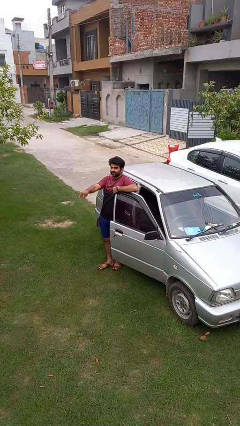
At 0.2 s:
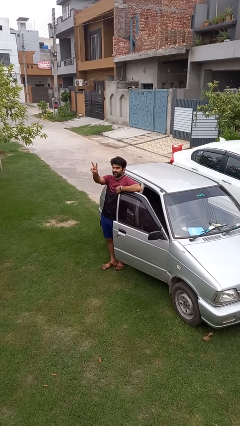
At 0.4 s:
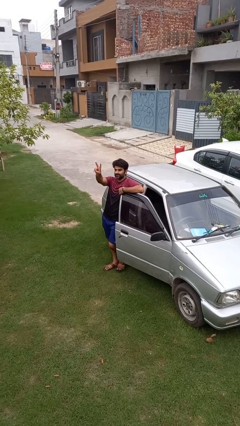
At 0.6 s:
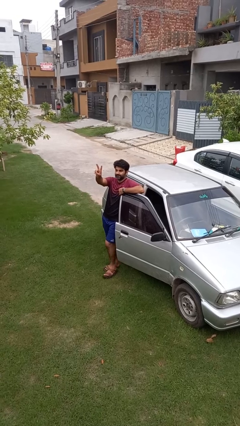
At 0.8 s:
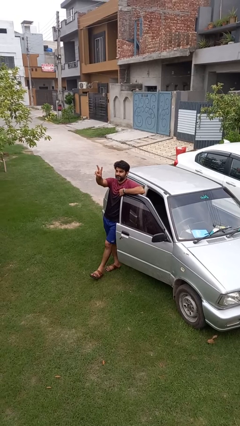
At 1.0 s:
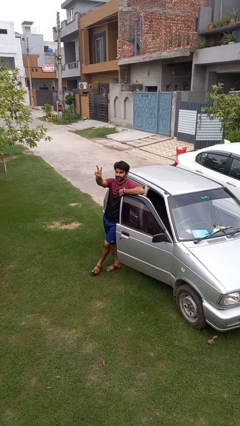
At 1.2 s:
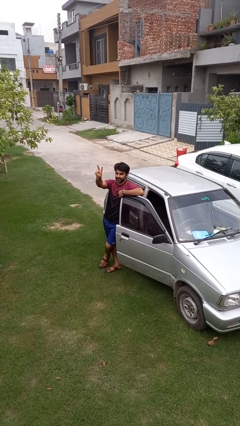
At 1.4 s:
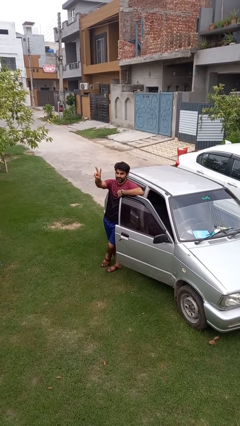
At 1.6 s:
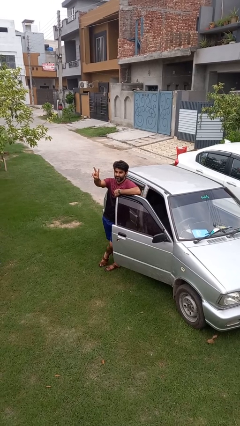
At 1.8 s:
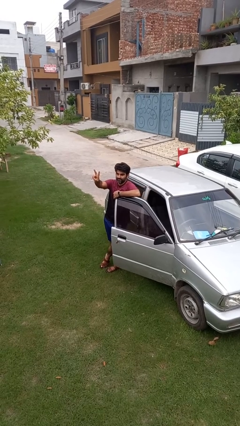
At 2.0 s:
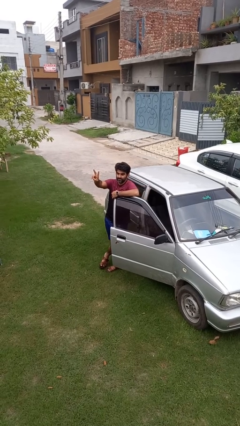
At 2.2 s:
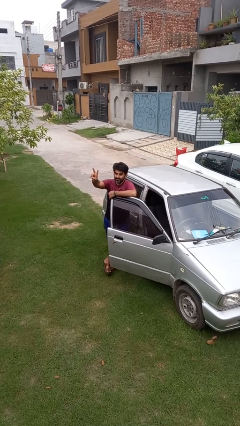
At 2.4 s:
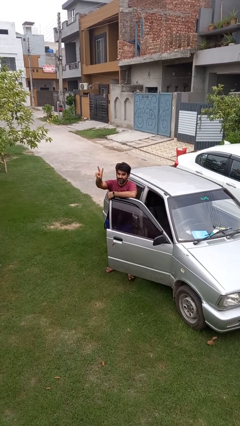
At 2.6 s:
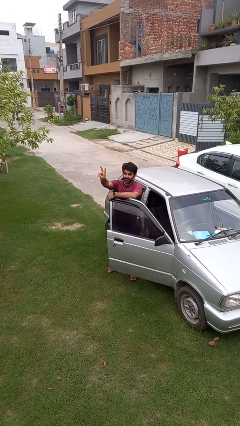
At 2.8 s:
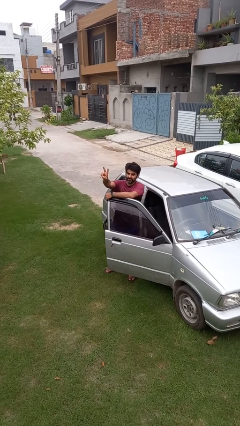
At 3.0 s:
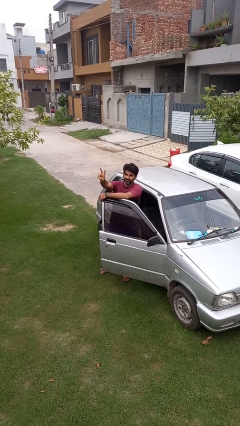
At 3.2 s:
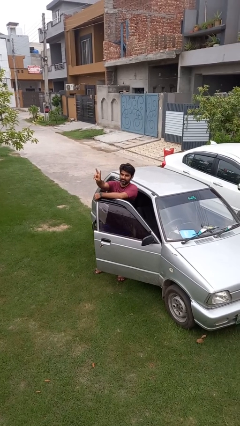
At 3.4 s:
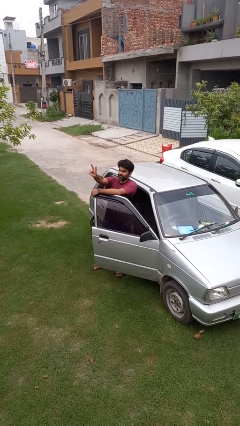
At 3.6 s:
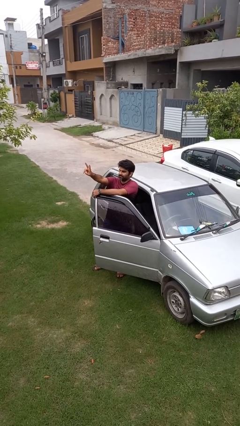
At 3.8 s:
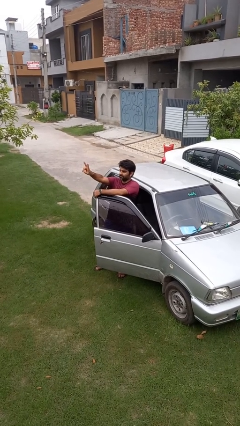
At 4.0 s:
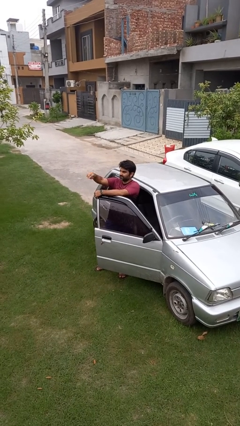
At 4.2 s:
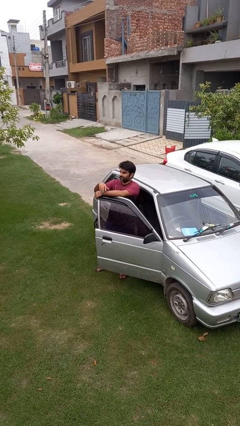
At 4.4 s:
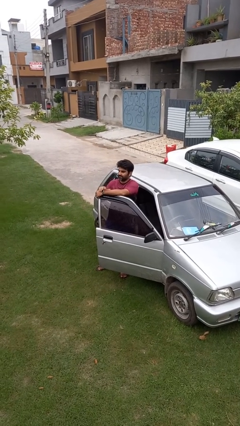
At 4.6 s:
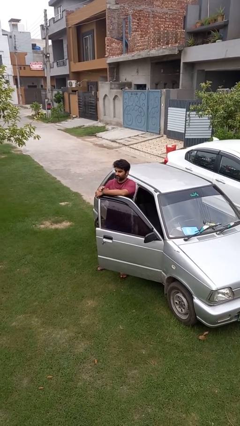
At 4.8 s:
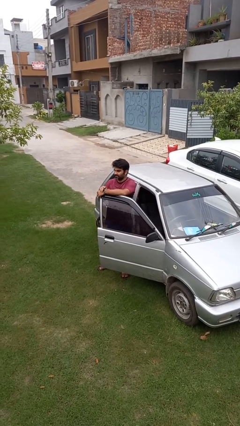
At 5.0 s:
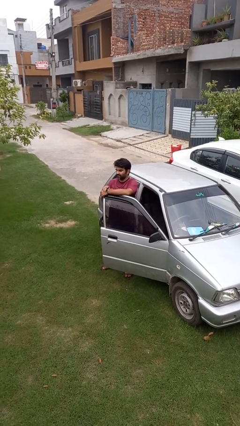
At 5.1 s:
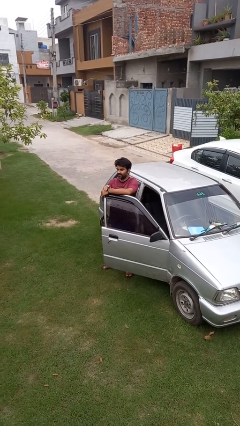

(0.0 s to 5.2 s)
person gestures peace

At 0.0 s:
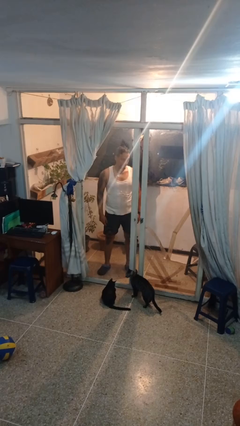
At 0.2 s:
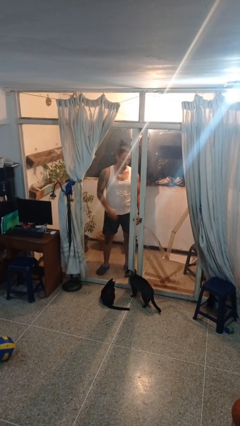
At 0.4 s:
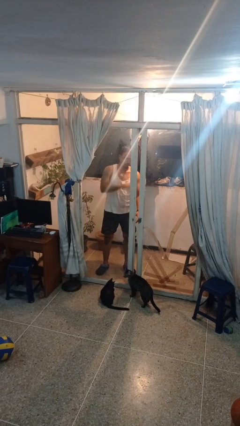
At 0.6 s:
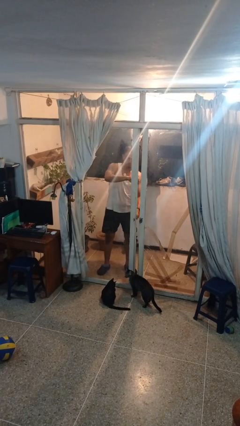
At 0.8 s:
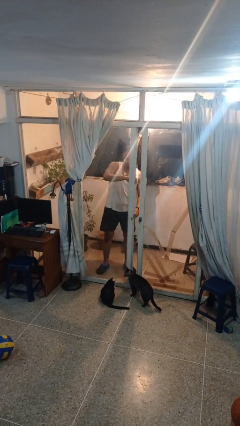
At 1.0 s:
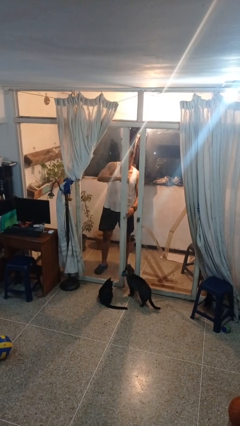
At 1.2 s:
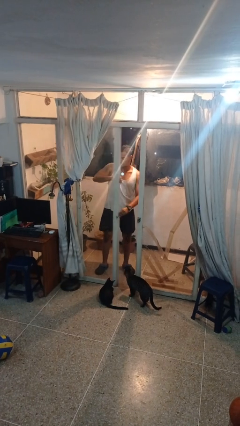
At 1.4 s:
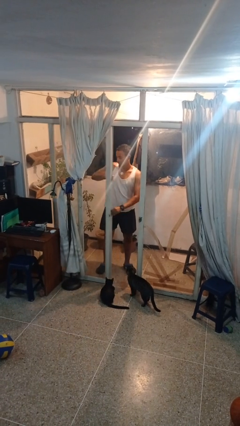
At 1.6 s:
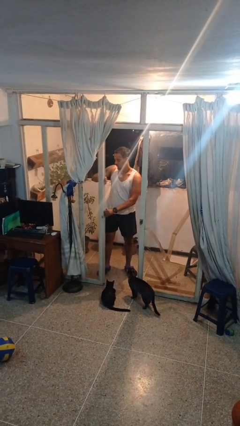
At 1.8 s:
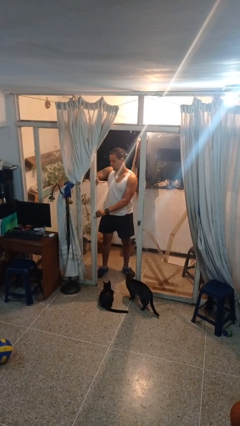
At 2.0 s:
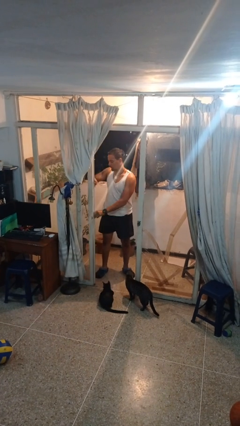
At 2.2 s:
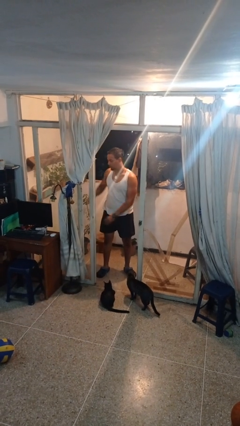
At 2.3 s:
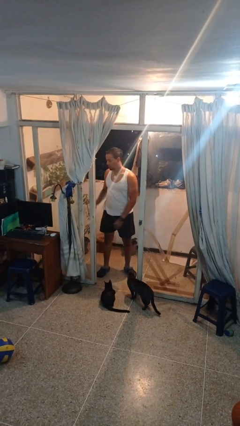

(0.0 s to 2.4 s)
person opens sliding door

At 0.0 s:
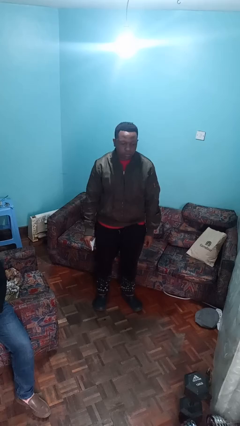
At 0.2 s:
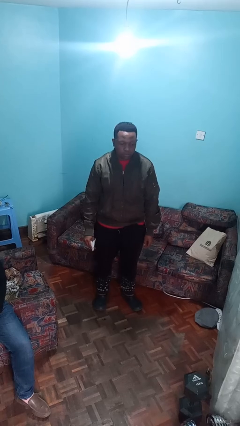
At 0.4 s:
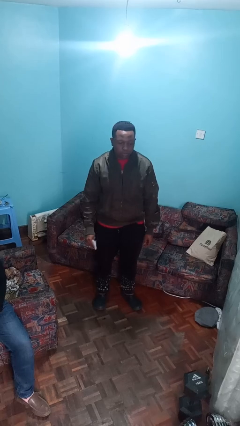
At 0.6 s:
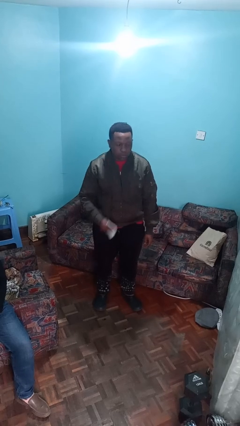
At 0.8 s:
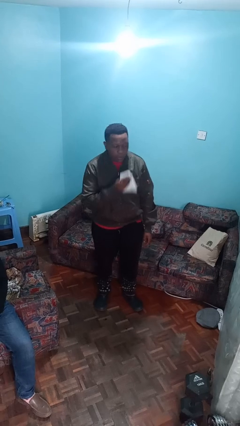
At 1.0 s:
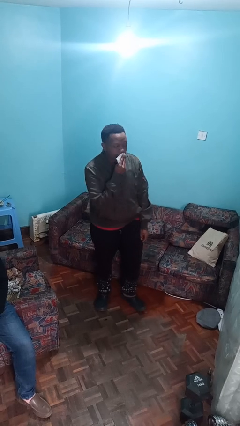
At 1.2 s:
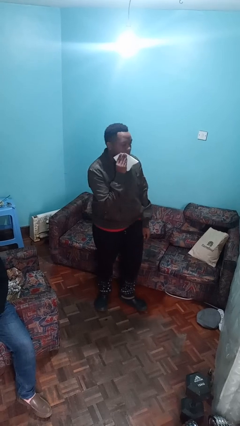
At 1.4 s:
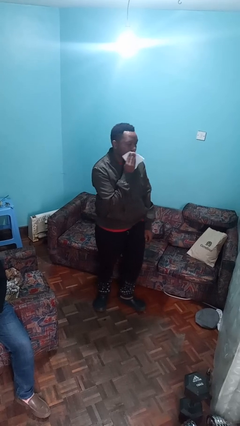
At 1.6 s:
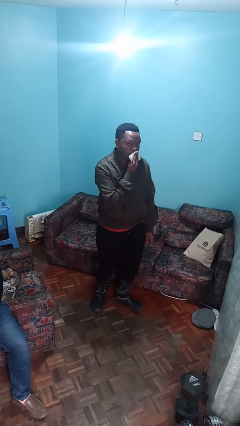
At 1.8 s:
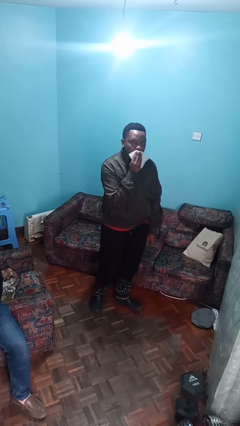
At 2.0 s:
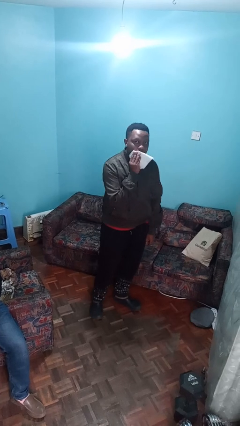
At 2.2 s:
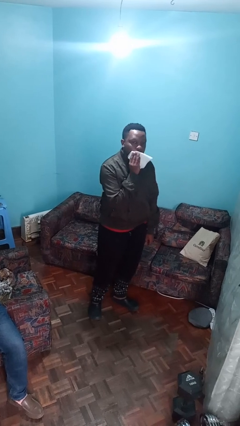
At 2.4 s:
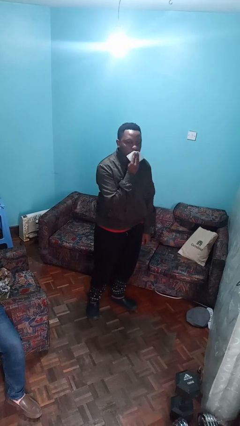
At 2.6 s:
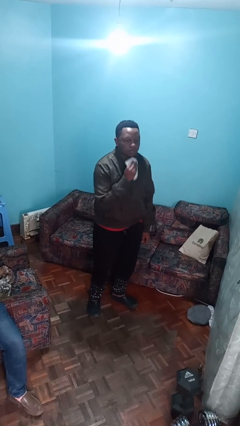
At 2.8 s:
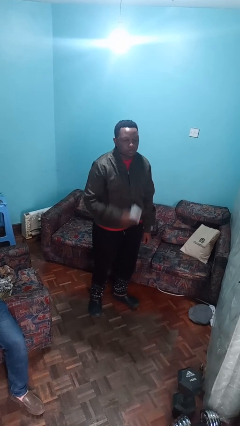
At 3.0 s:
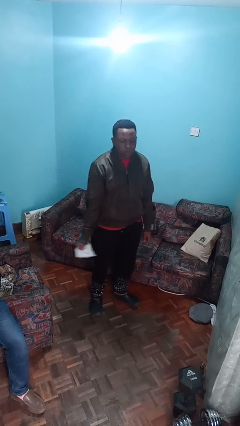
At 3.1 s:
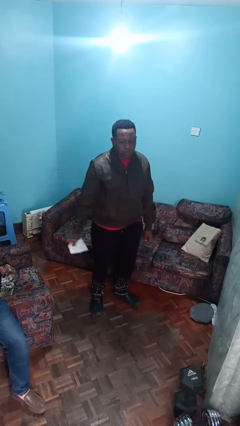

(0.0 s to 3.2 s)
person wipes mouth with napkin

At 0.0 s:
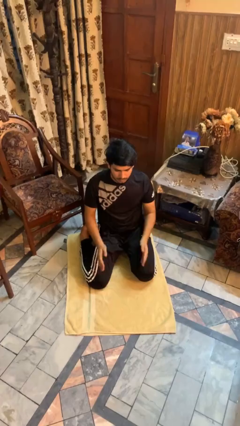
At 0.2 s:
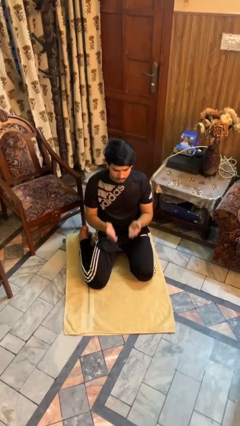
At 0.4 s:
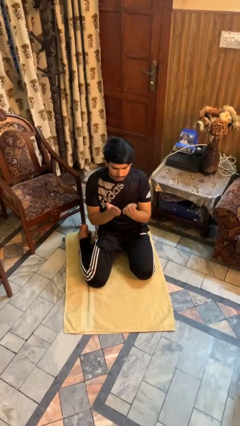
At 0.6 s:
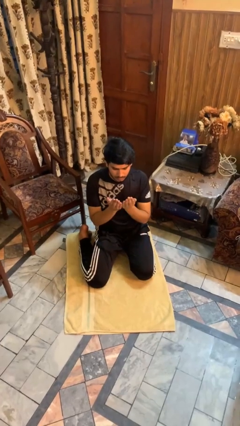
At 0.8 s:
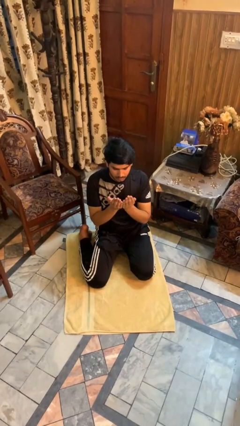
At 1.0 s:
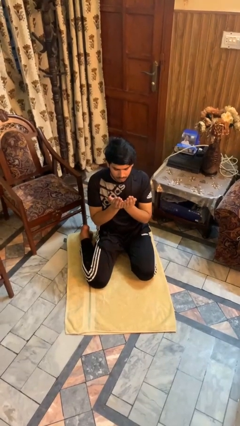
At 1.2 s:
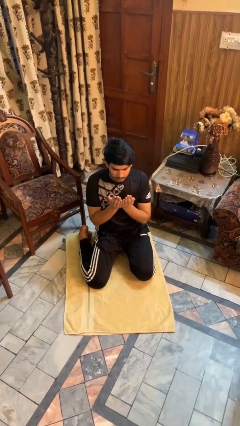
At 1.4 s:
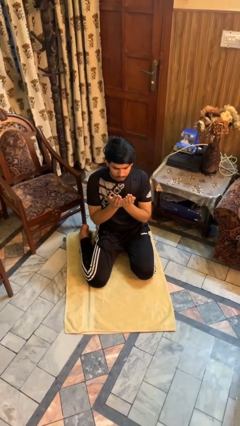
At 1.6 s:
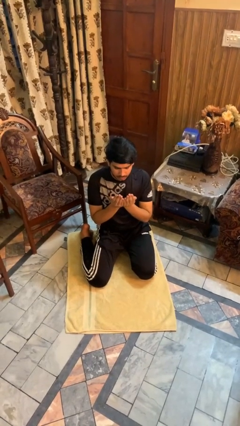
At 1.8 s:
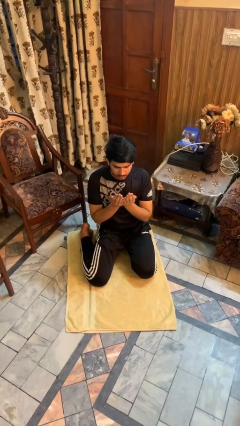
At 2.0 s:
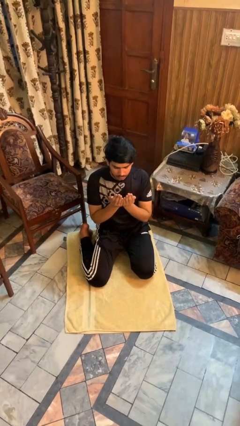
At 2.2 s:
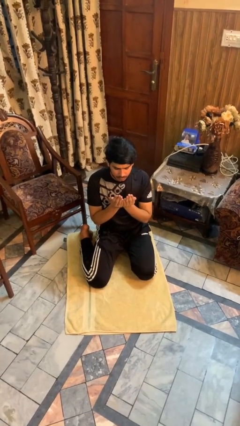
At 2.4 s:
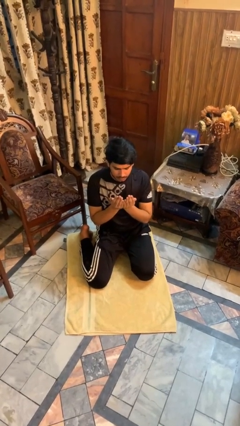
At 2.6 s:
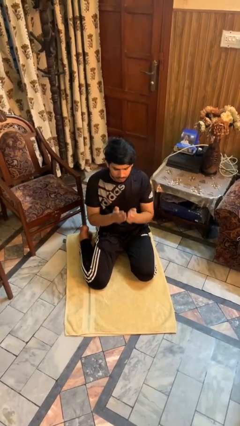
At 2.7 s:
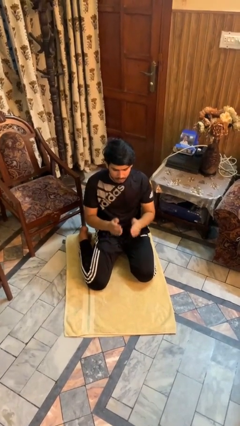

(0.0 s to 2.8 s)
person prays

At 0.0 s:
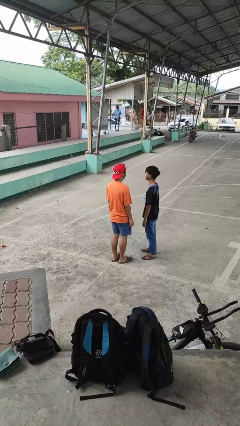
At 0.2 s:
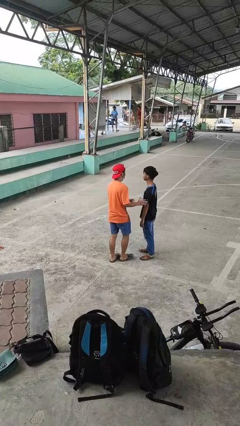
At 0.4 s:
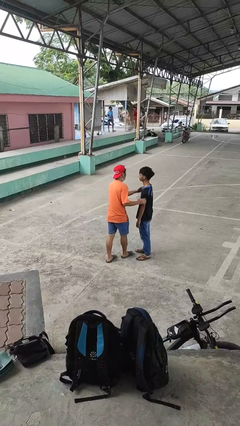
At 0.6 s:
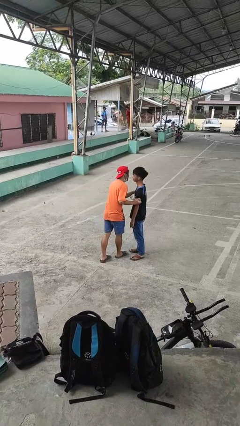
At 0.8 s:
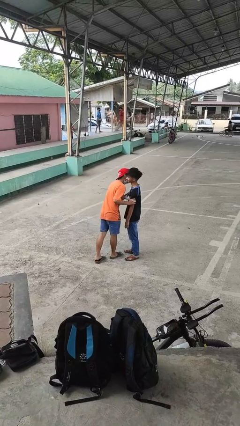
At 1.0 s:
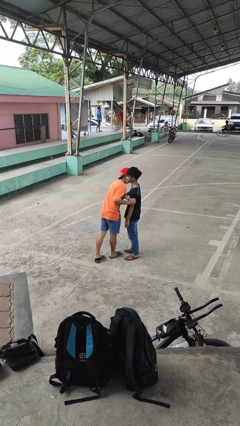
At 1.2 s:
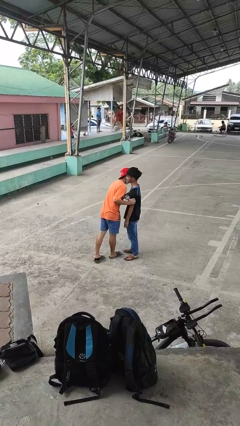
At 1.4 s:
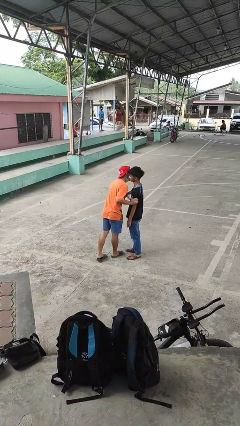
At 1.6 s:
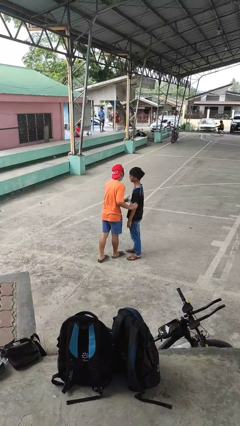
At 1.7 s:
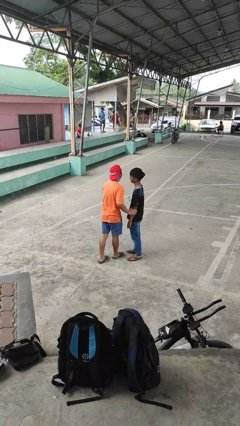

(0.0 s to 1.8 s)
person kisses cheek of person

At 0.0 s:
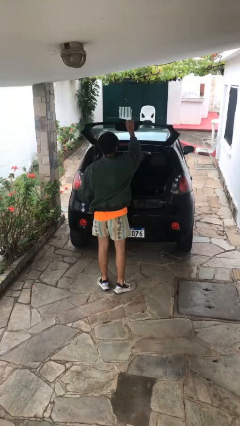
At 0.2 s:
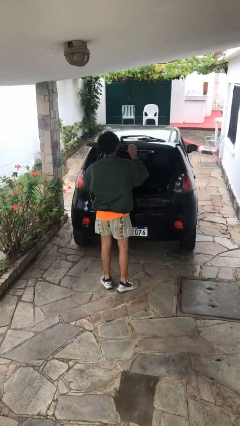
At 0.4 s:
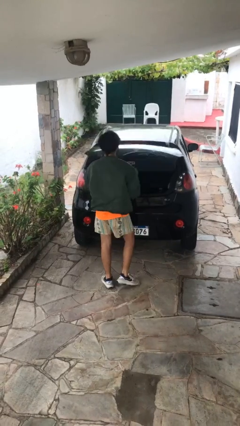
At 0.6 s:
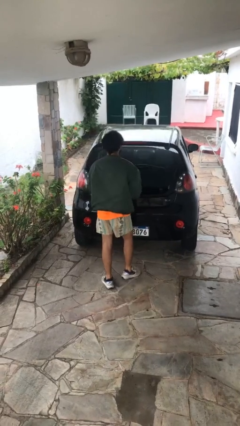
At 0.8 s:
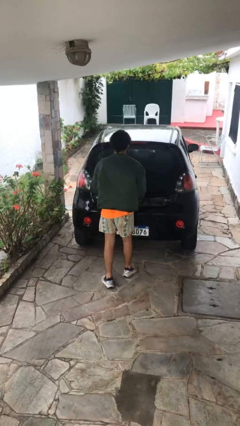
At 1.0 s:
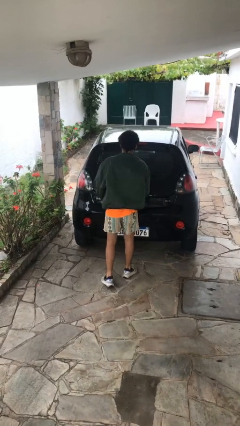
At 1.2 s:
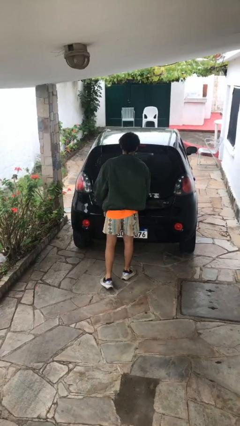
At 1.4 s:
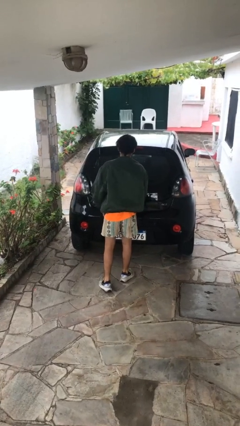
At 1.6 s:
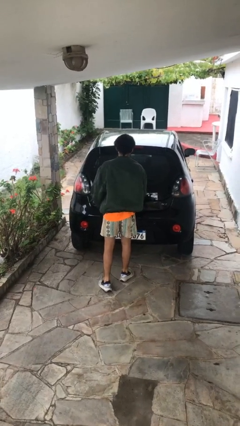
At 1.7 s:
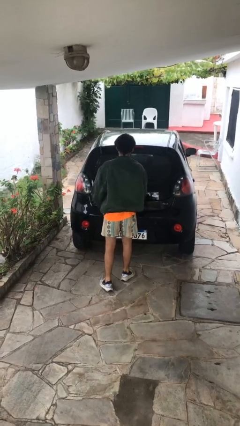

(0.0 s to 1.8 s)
person closes car trunk

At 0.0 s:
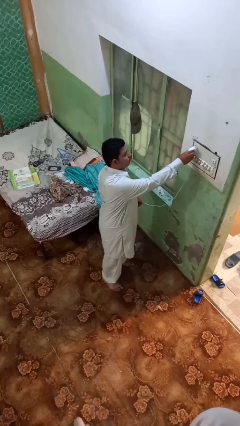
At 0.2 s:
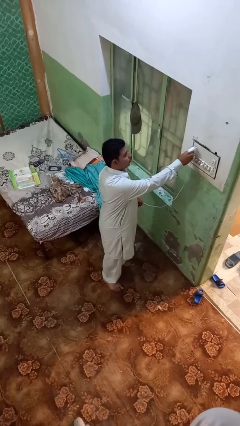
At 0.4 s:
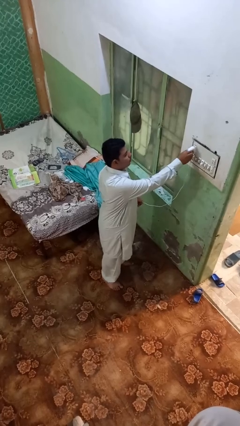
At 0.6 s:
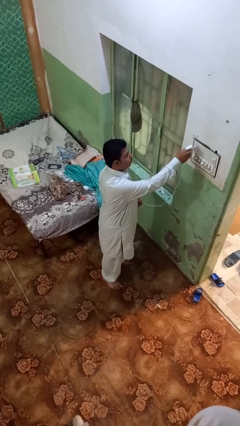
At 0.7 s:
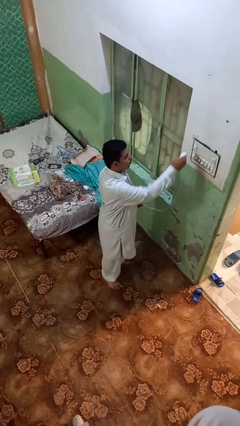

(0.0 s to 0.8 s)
person unplugs from electrical socket
